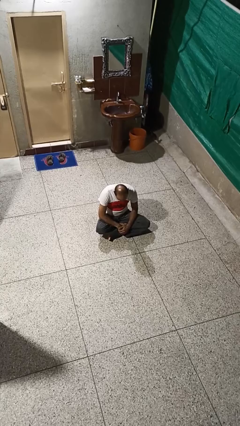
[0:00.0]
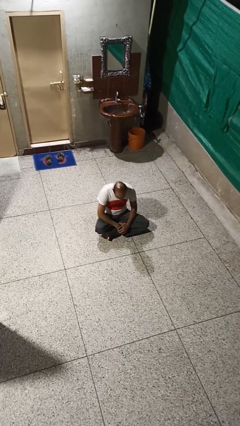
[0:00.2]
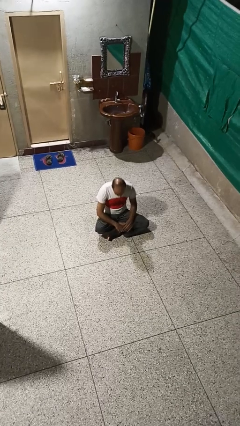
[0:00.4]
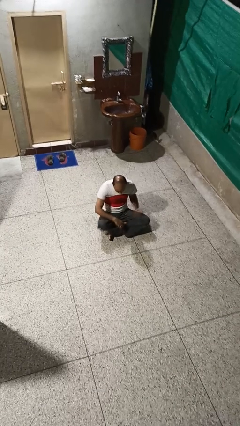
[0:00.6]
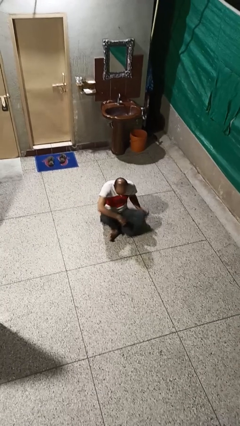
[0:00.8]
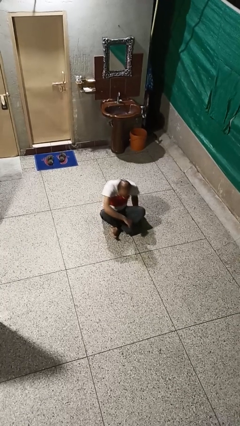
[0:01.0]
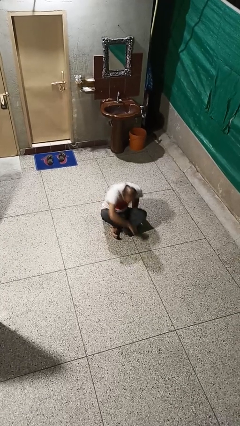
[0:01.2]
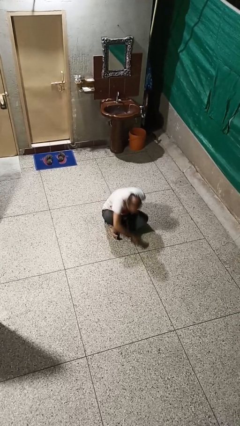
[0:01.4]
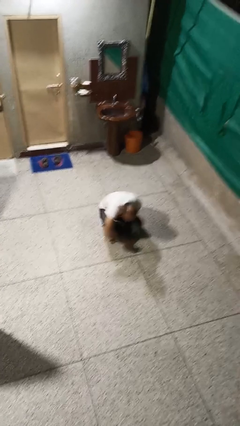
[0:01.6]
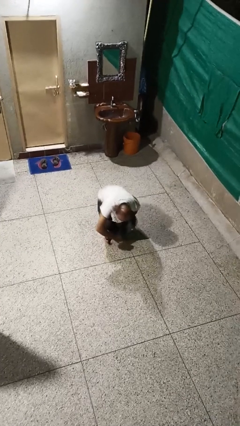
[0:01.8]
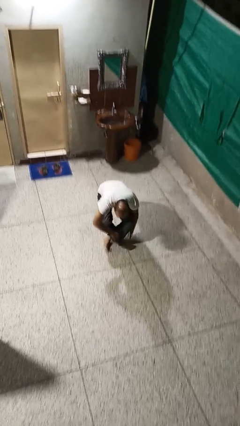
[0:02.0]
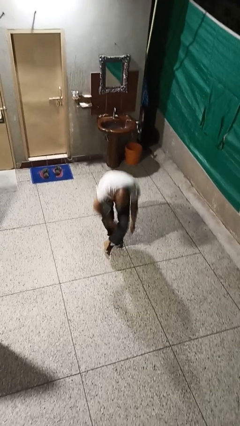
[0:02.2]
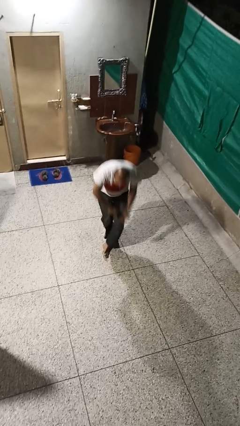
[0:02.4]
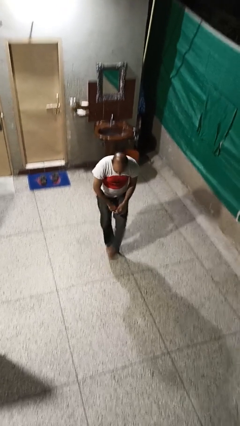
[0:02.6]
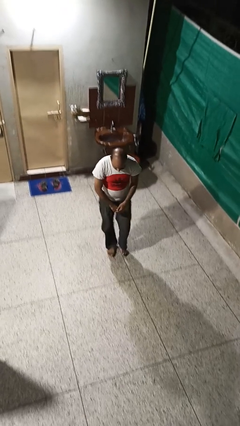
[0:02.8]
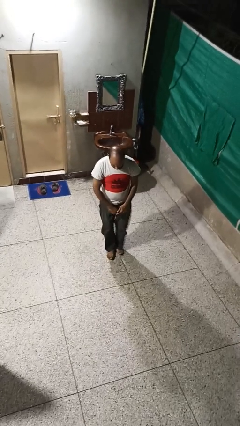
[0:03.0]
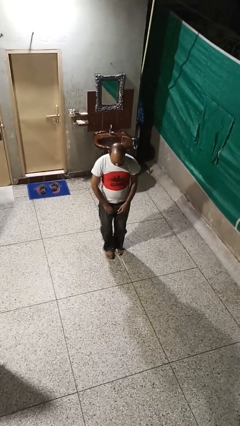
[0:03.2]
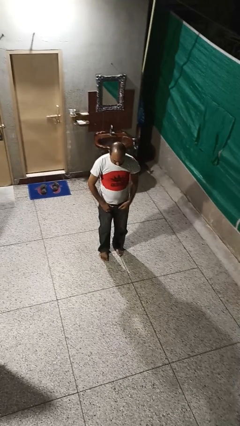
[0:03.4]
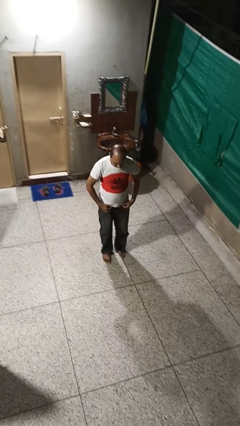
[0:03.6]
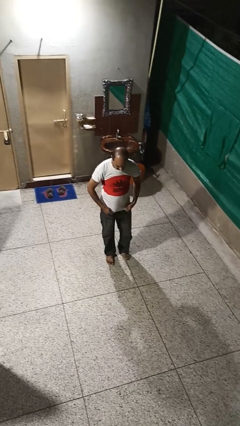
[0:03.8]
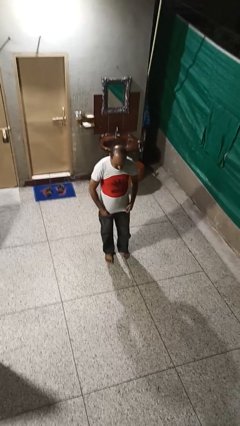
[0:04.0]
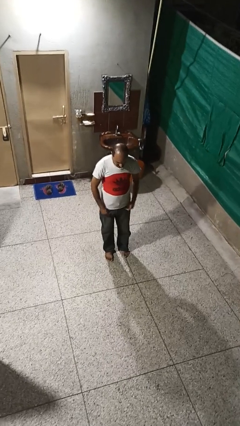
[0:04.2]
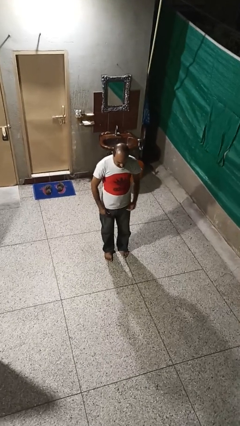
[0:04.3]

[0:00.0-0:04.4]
person stands up from floor

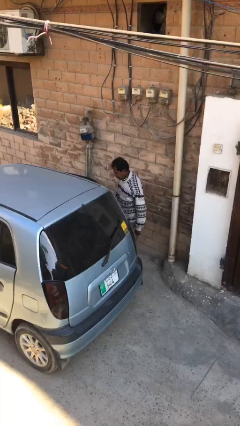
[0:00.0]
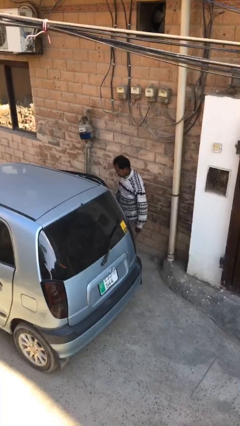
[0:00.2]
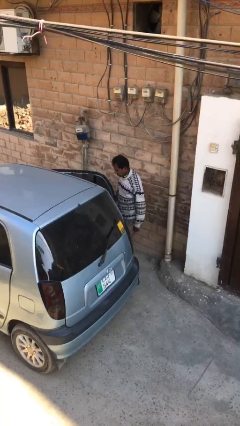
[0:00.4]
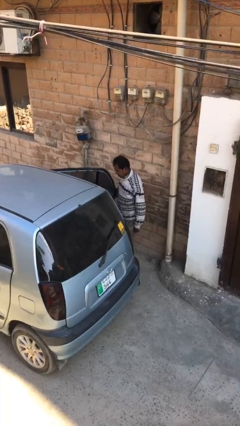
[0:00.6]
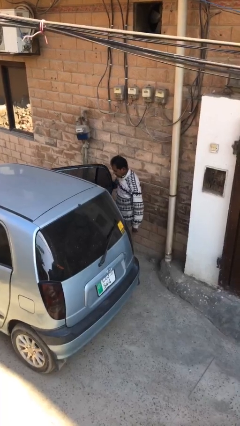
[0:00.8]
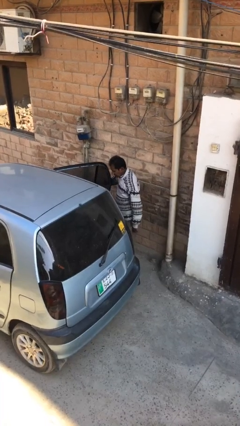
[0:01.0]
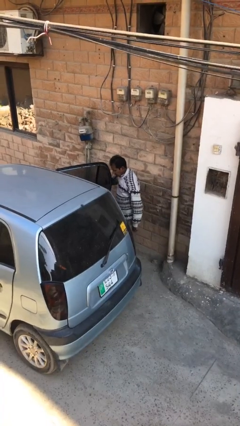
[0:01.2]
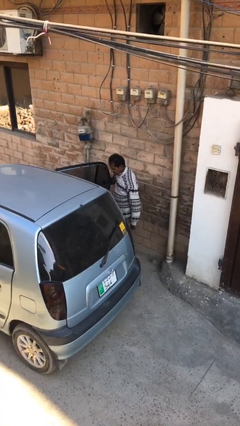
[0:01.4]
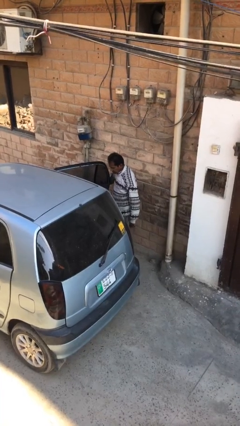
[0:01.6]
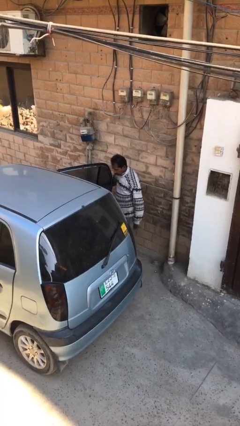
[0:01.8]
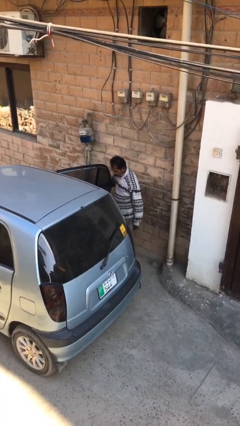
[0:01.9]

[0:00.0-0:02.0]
person opens car door

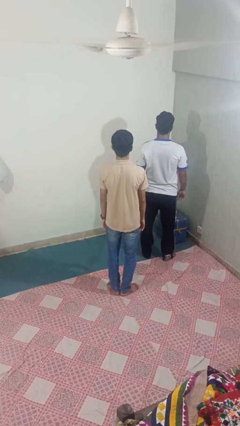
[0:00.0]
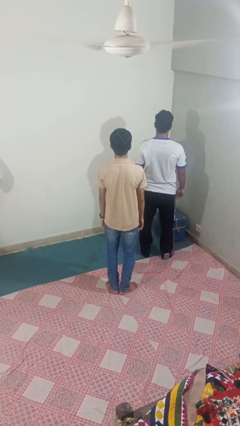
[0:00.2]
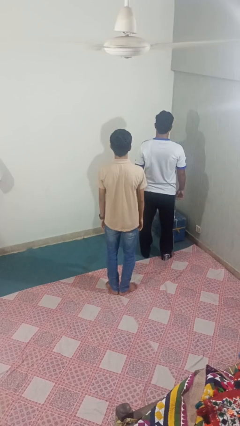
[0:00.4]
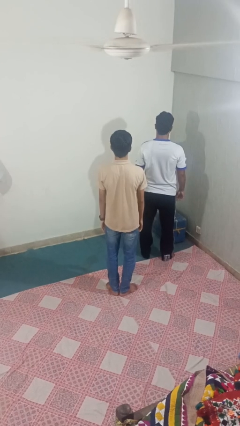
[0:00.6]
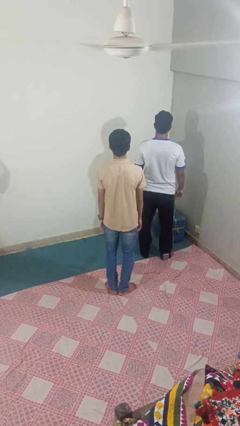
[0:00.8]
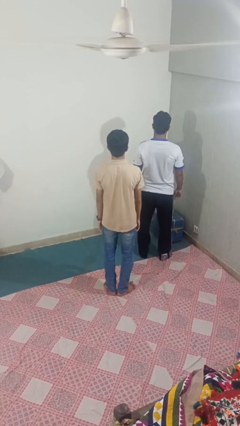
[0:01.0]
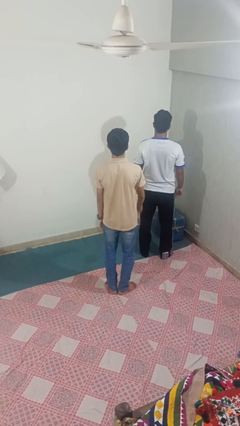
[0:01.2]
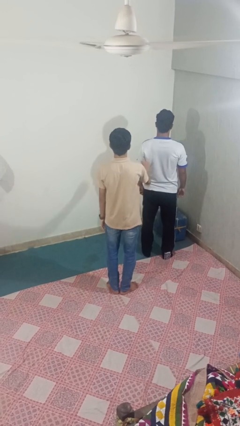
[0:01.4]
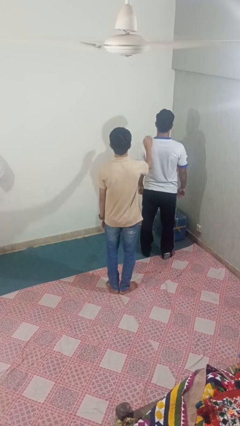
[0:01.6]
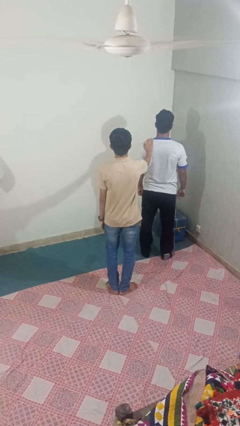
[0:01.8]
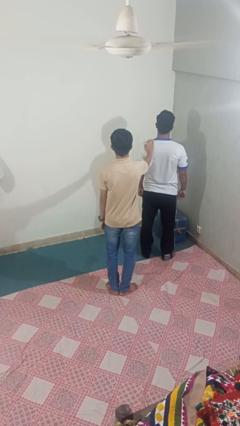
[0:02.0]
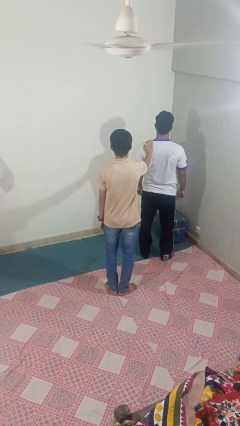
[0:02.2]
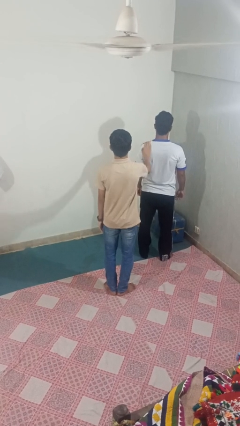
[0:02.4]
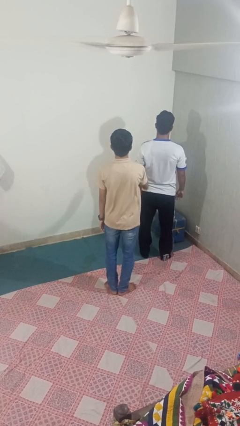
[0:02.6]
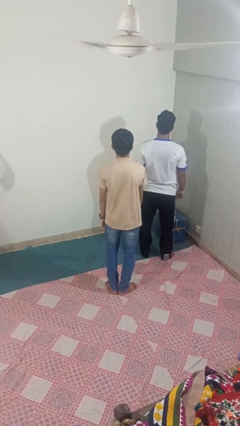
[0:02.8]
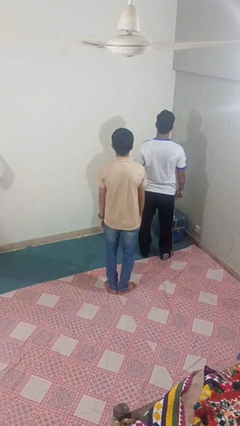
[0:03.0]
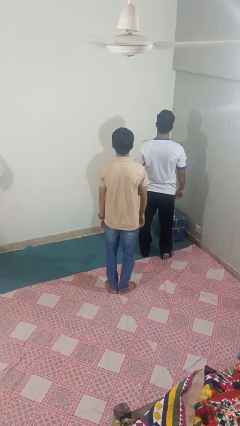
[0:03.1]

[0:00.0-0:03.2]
person touches back of person

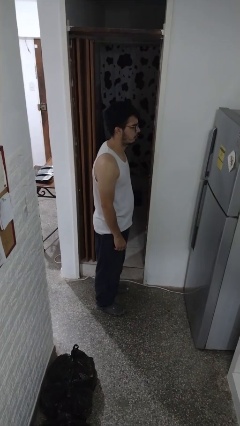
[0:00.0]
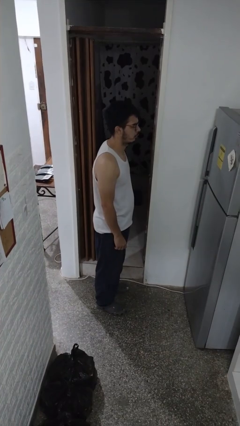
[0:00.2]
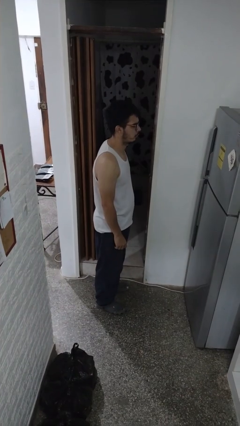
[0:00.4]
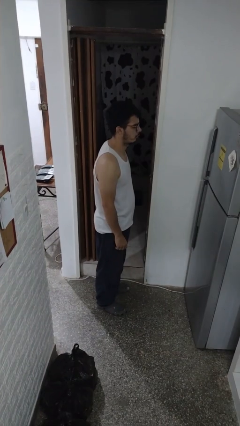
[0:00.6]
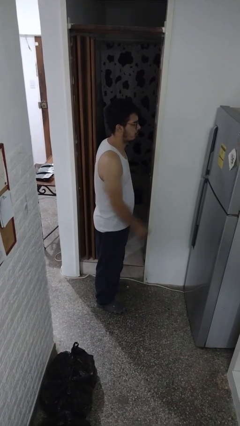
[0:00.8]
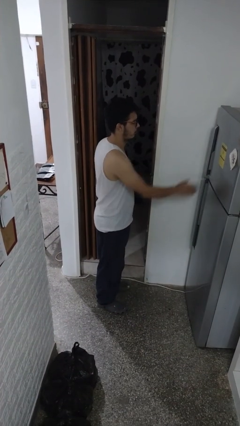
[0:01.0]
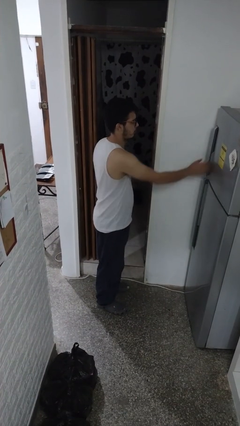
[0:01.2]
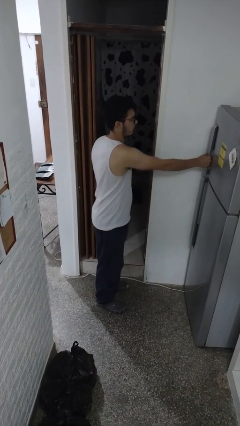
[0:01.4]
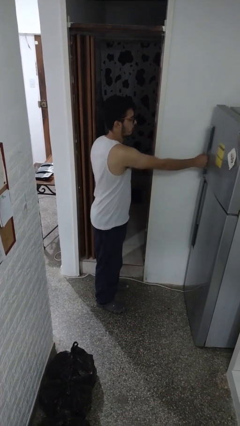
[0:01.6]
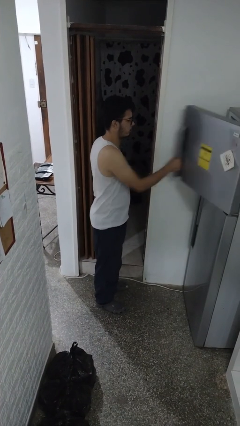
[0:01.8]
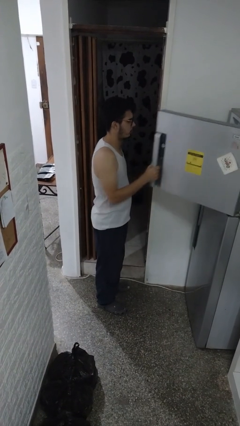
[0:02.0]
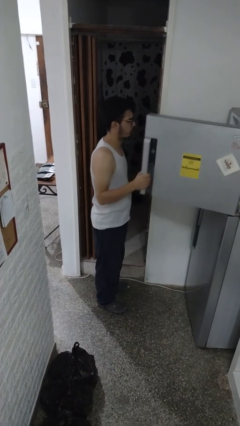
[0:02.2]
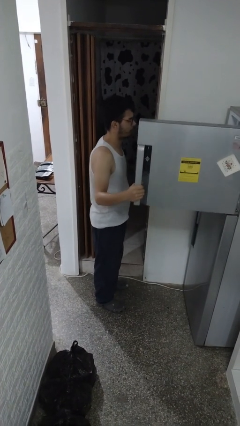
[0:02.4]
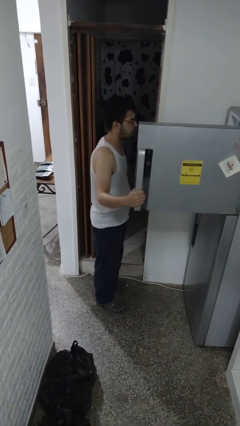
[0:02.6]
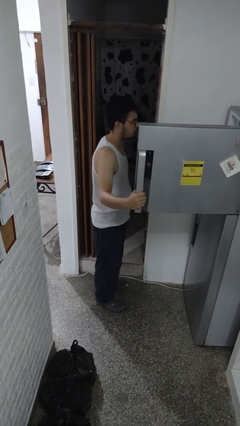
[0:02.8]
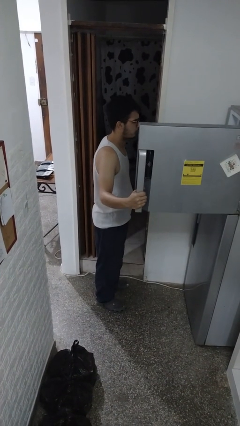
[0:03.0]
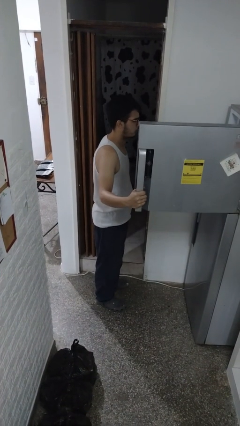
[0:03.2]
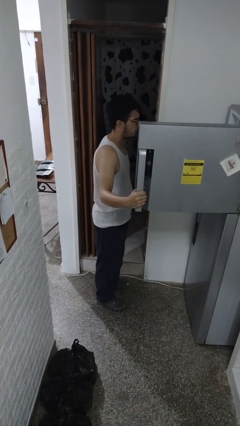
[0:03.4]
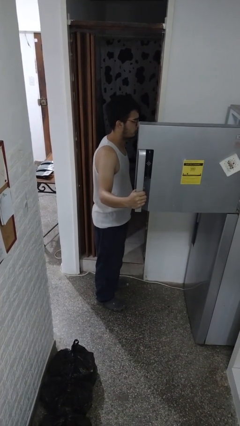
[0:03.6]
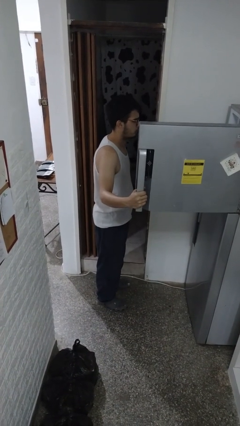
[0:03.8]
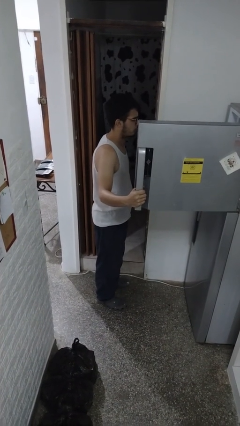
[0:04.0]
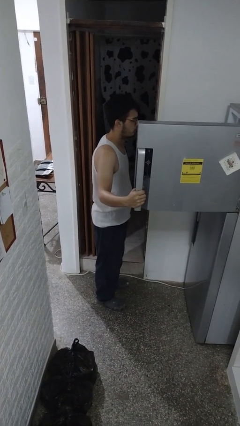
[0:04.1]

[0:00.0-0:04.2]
person opens refrigerator

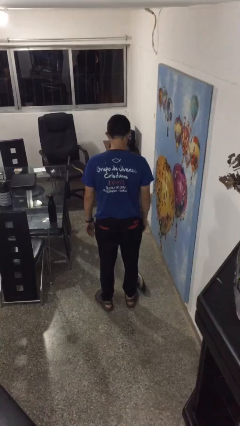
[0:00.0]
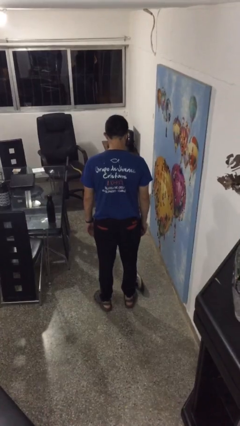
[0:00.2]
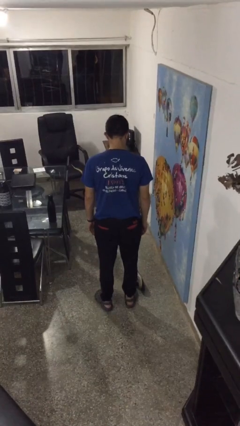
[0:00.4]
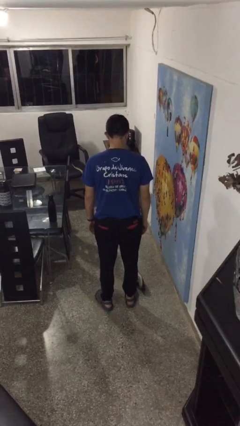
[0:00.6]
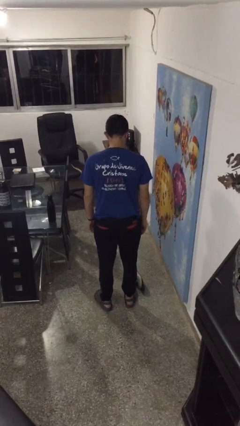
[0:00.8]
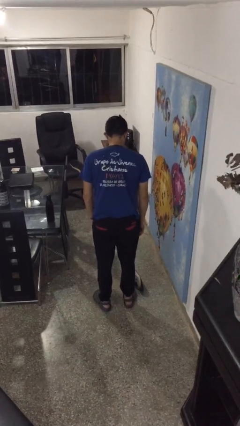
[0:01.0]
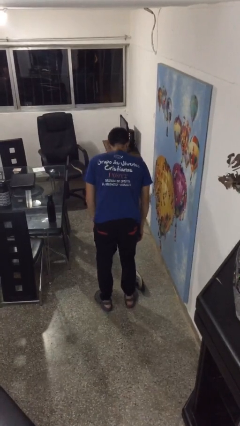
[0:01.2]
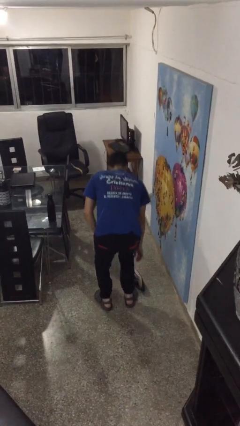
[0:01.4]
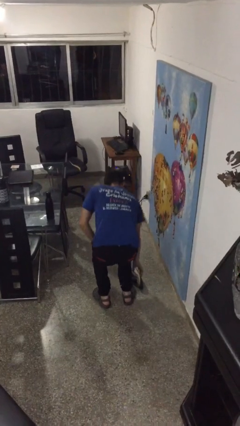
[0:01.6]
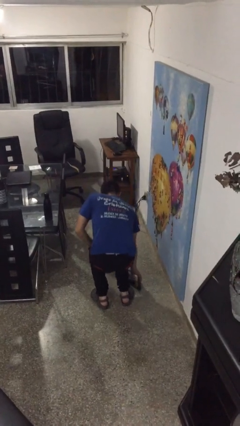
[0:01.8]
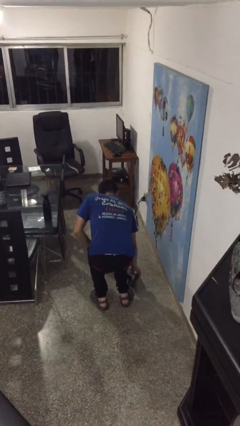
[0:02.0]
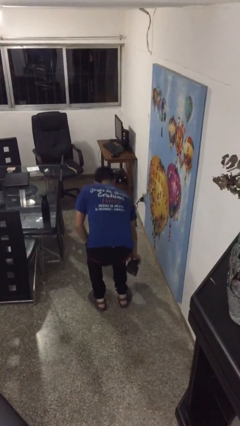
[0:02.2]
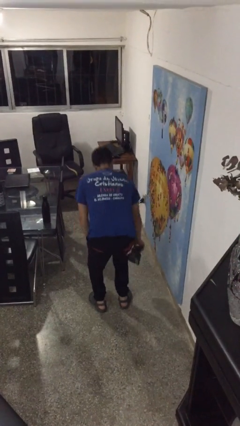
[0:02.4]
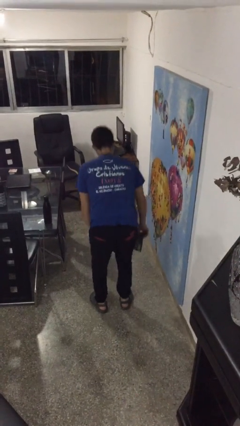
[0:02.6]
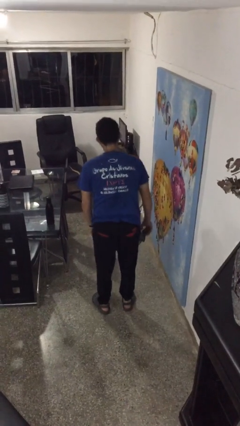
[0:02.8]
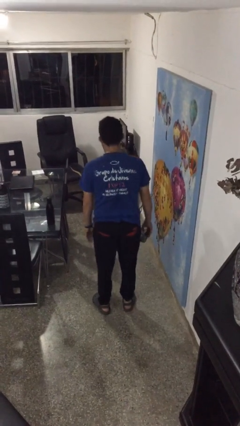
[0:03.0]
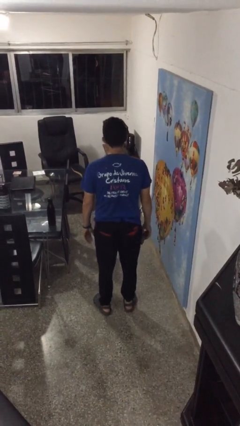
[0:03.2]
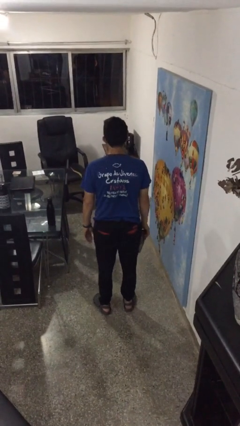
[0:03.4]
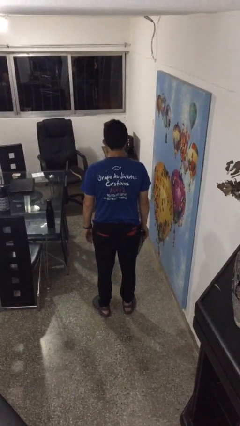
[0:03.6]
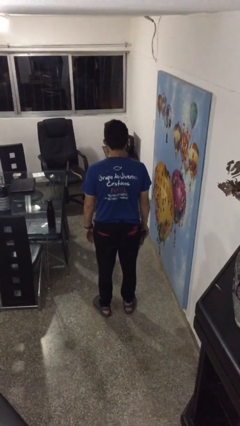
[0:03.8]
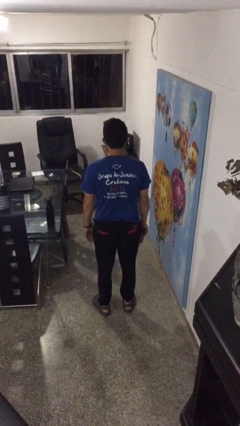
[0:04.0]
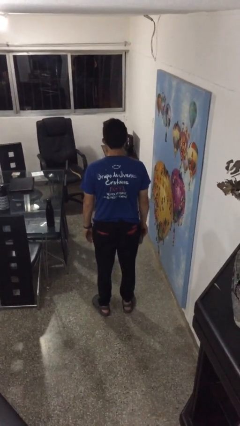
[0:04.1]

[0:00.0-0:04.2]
person picks up object from floor
